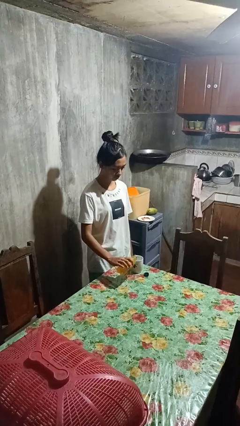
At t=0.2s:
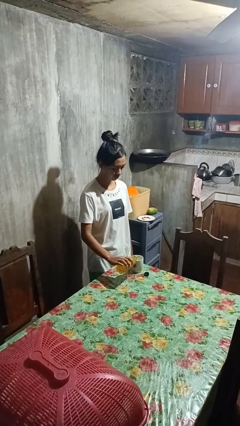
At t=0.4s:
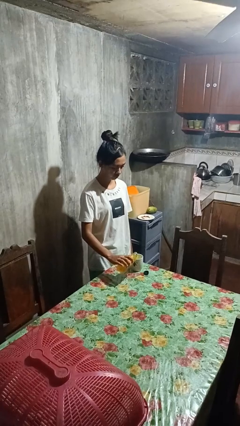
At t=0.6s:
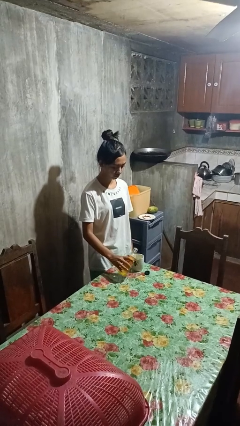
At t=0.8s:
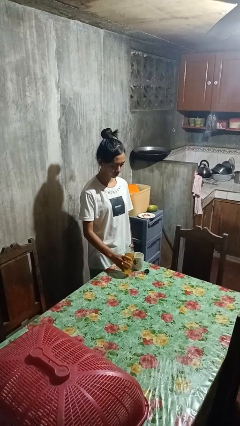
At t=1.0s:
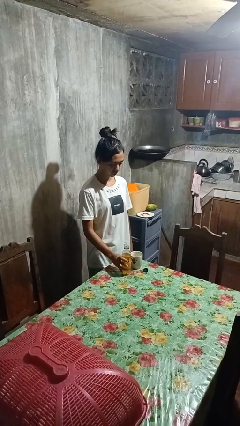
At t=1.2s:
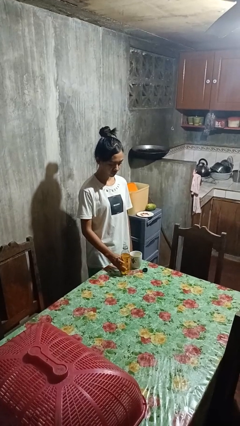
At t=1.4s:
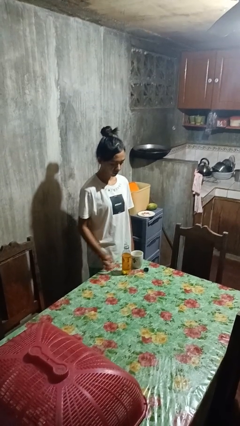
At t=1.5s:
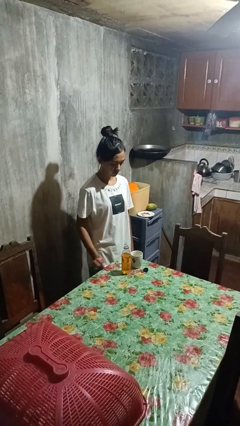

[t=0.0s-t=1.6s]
person pours liquid into cup

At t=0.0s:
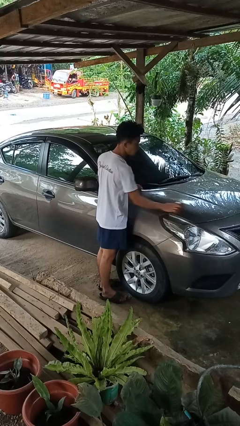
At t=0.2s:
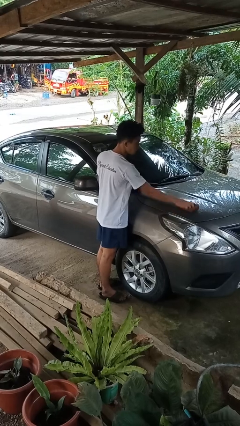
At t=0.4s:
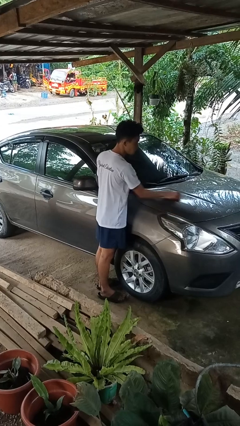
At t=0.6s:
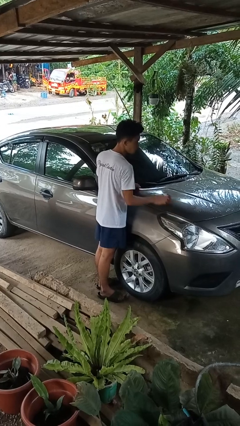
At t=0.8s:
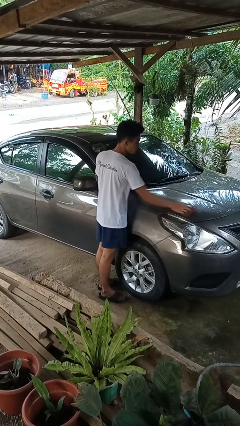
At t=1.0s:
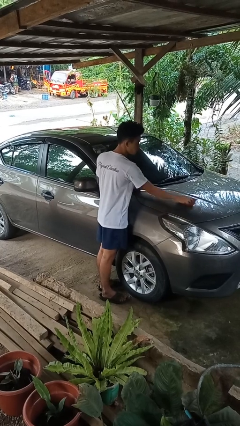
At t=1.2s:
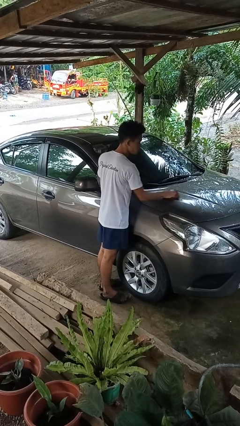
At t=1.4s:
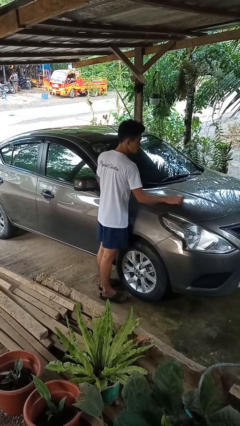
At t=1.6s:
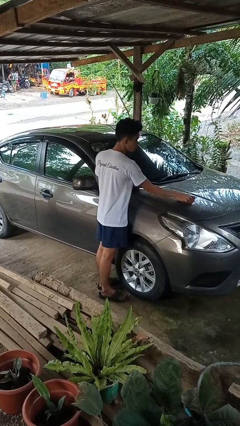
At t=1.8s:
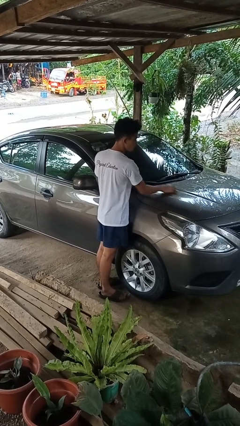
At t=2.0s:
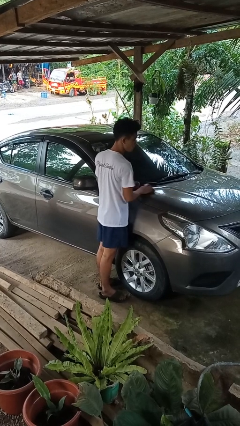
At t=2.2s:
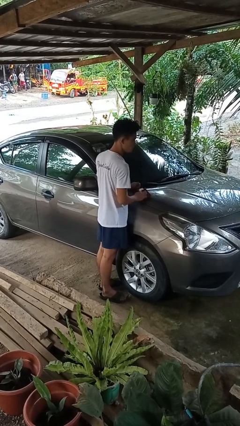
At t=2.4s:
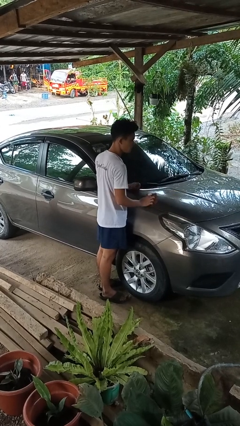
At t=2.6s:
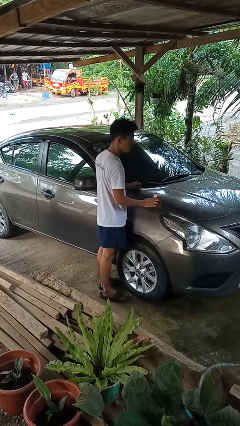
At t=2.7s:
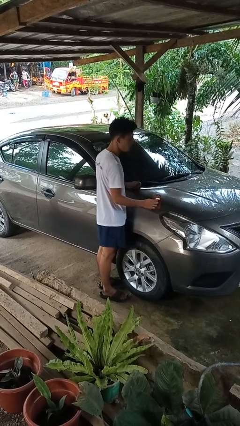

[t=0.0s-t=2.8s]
person polishes car with rag

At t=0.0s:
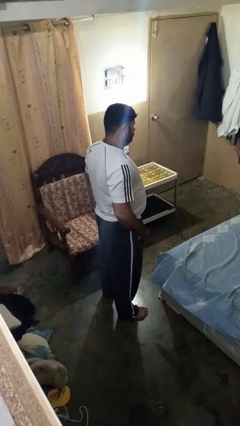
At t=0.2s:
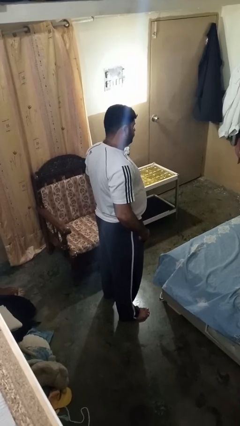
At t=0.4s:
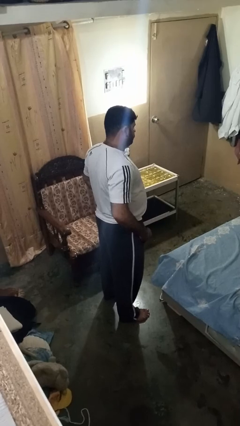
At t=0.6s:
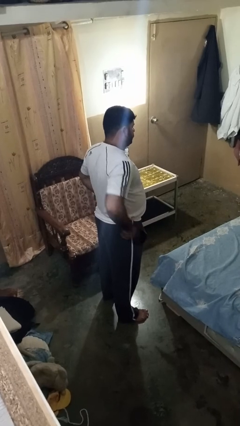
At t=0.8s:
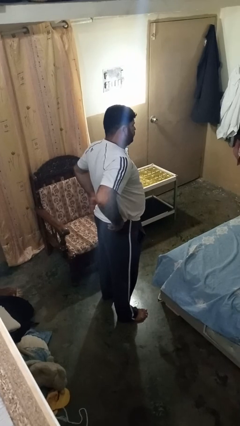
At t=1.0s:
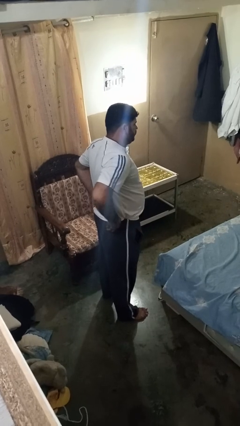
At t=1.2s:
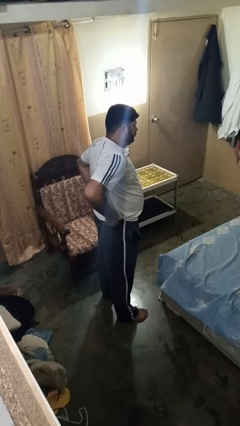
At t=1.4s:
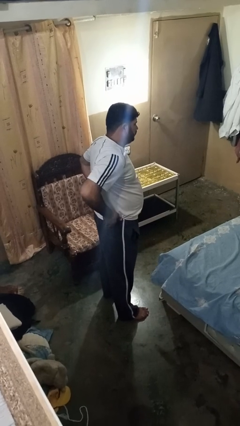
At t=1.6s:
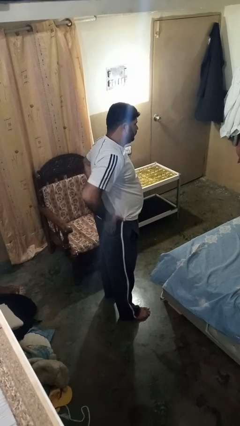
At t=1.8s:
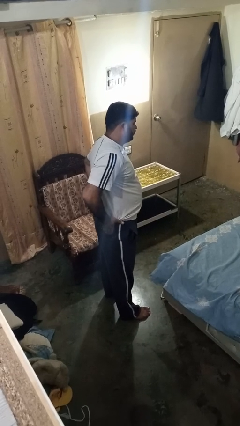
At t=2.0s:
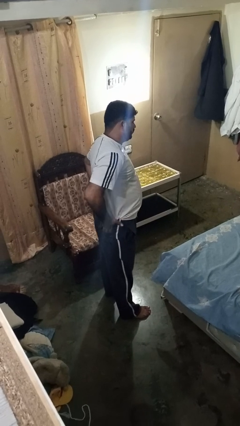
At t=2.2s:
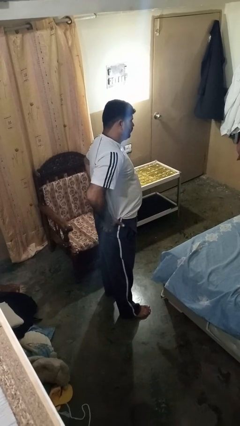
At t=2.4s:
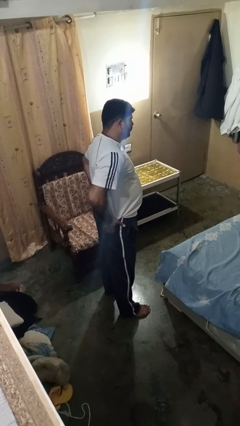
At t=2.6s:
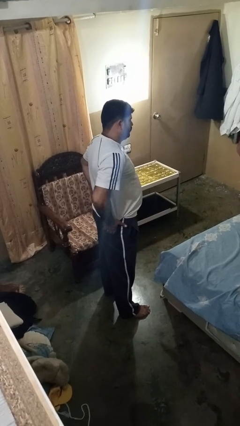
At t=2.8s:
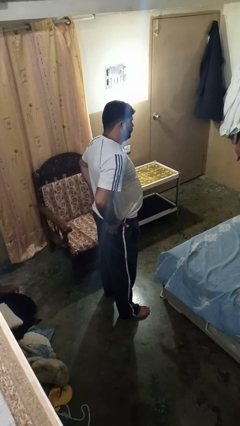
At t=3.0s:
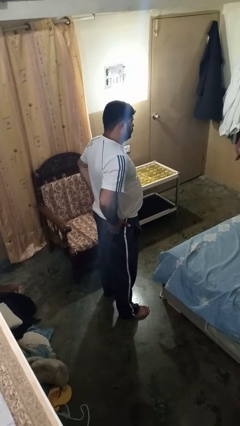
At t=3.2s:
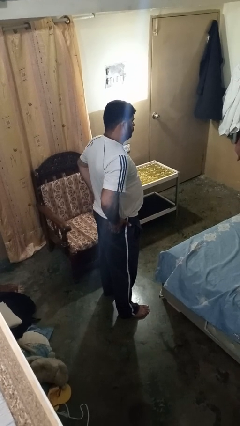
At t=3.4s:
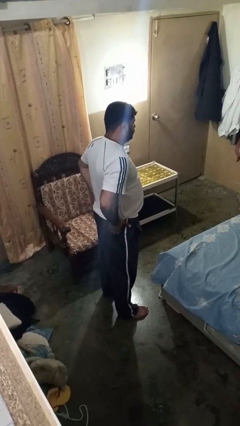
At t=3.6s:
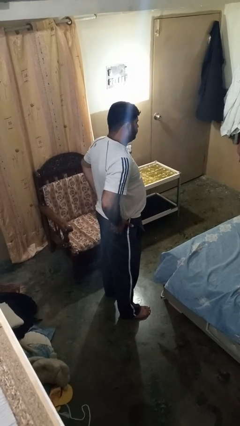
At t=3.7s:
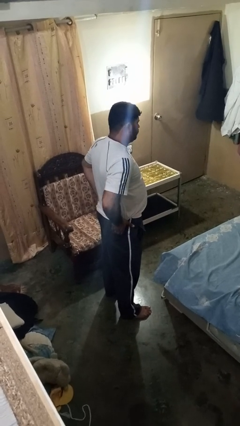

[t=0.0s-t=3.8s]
person puts hands in back pockets

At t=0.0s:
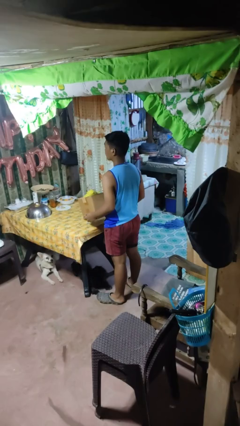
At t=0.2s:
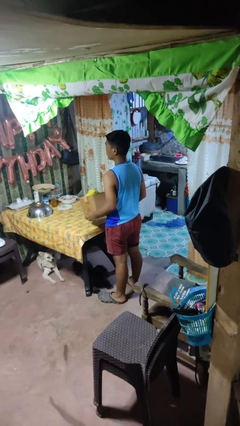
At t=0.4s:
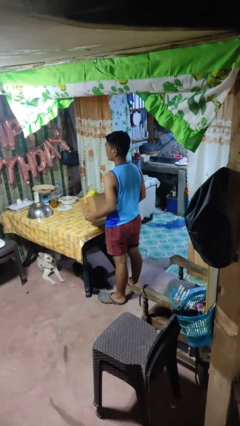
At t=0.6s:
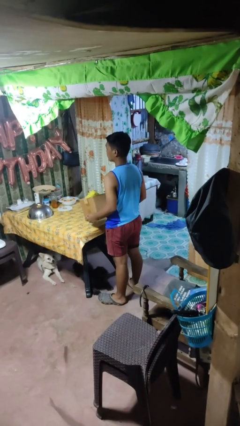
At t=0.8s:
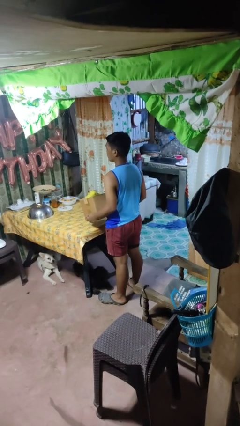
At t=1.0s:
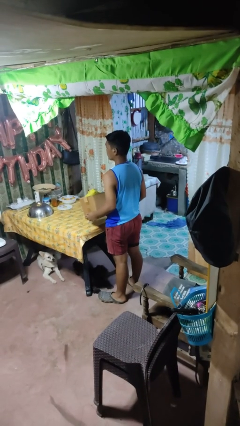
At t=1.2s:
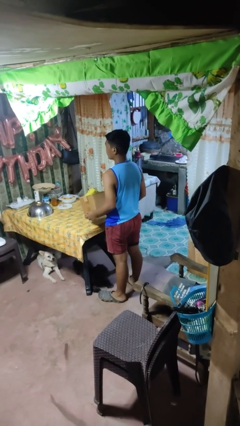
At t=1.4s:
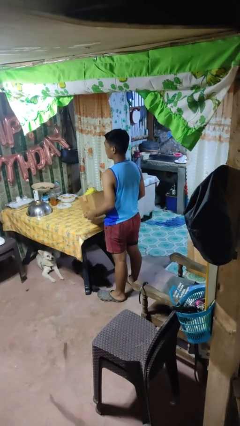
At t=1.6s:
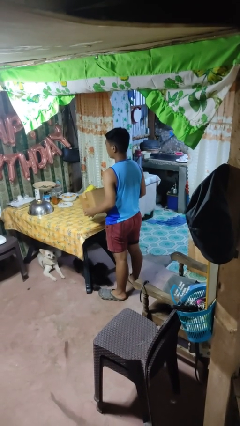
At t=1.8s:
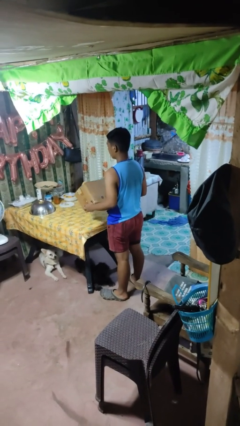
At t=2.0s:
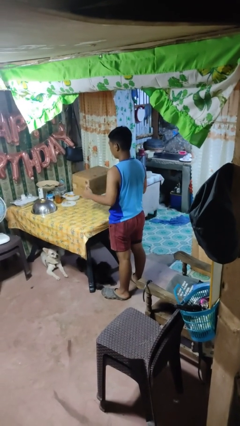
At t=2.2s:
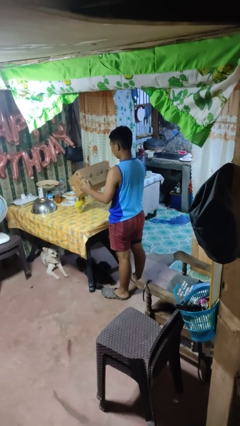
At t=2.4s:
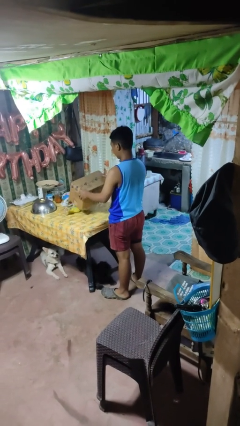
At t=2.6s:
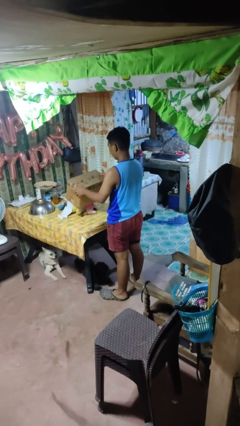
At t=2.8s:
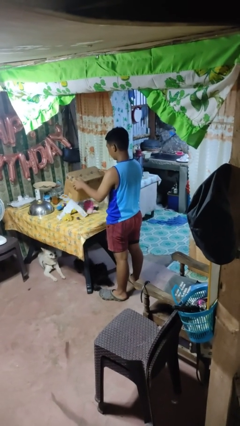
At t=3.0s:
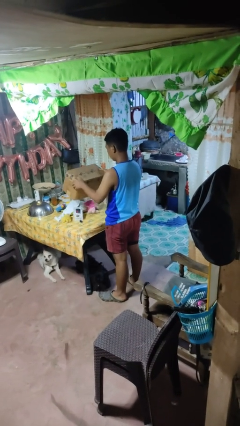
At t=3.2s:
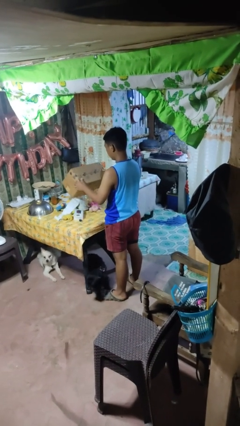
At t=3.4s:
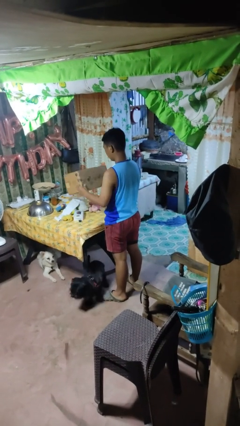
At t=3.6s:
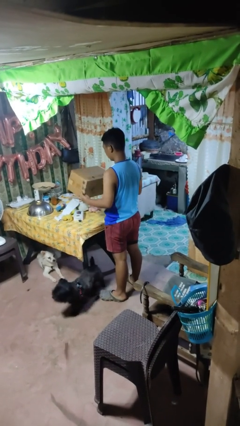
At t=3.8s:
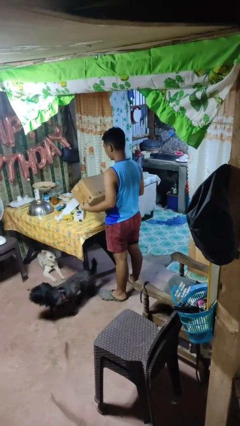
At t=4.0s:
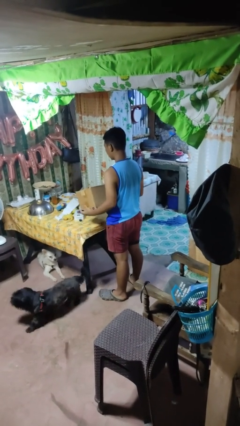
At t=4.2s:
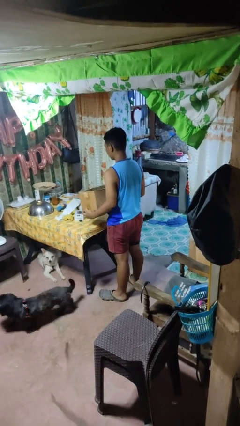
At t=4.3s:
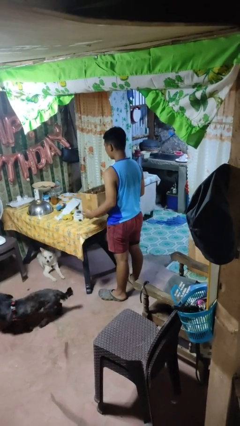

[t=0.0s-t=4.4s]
person unloads box onto table

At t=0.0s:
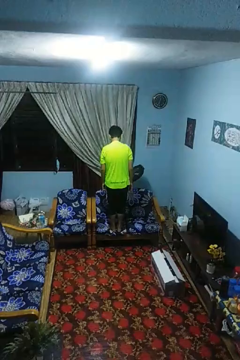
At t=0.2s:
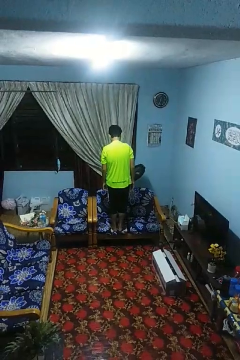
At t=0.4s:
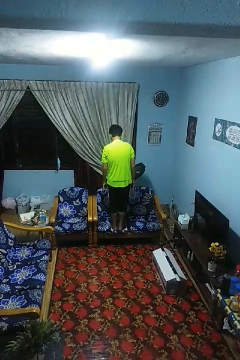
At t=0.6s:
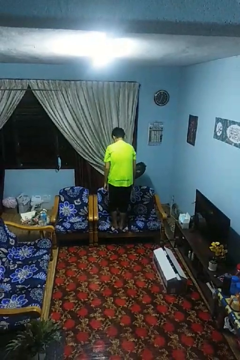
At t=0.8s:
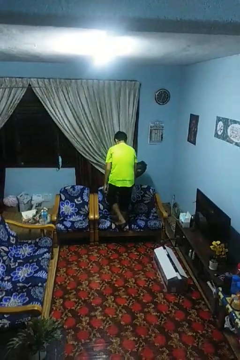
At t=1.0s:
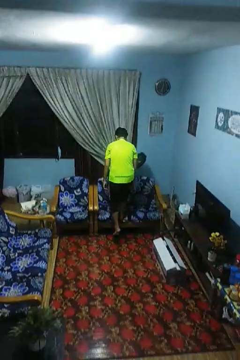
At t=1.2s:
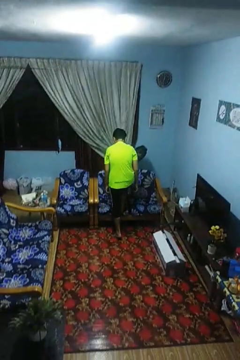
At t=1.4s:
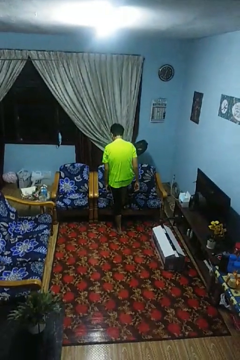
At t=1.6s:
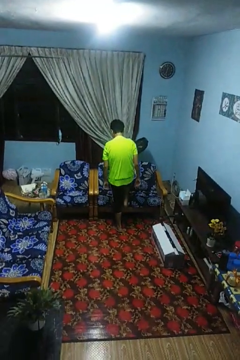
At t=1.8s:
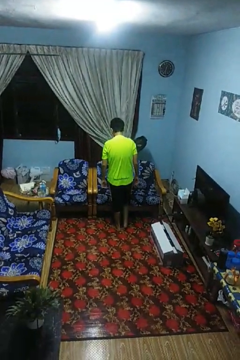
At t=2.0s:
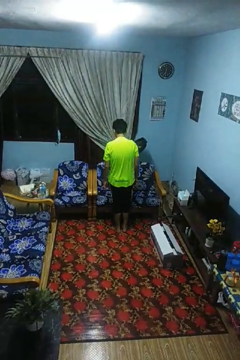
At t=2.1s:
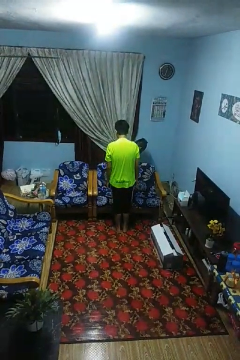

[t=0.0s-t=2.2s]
person climbs off couch

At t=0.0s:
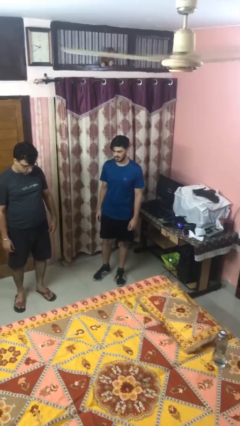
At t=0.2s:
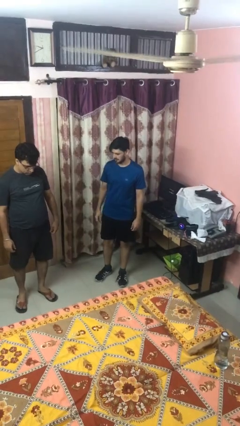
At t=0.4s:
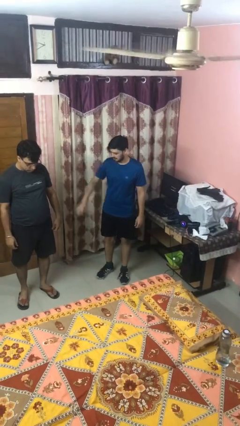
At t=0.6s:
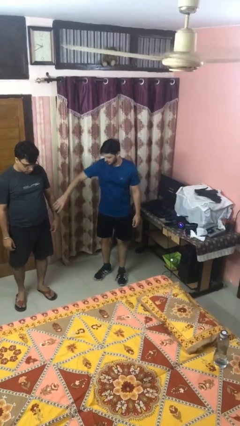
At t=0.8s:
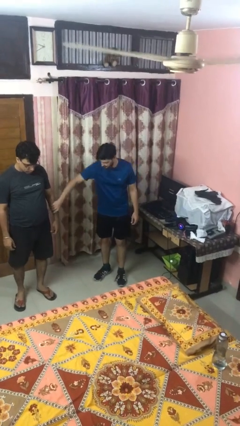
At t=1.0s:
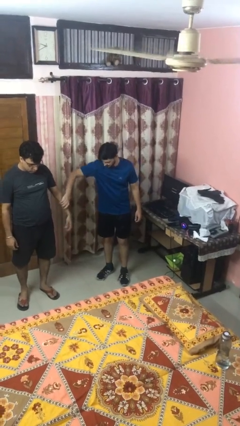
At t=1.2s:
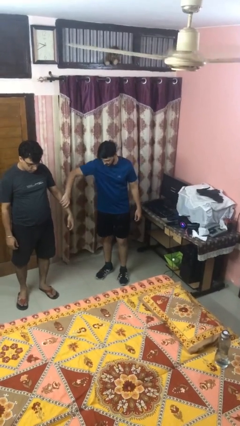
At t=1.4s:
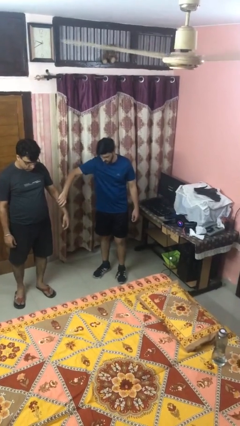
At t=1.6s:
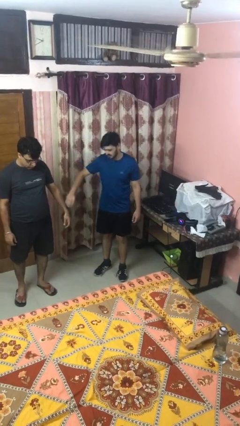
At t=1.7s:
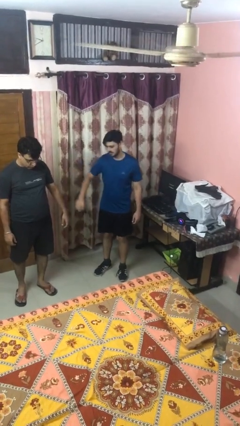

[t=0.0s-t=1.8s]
person grabs person by forearm

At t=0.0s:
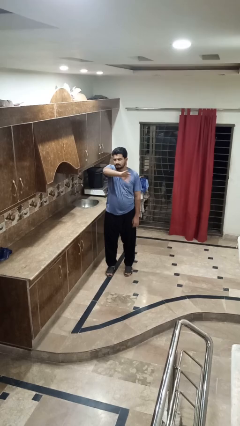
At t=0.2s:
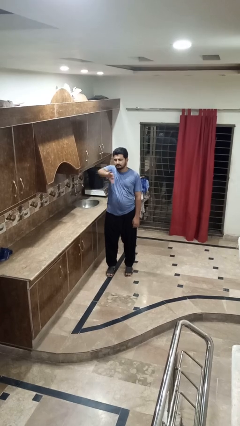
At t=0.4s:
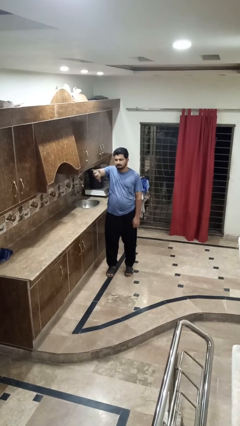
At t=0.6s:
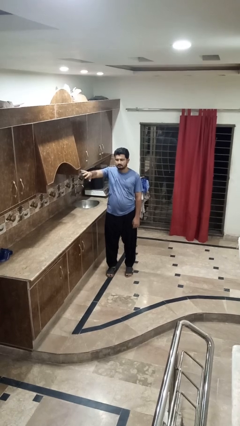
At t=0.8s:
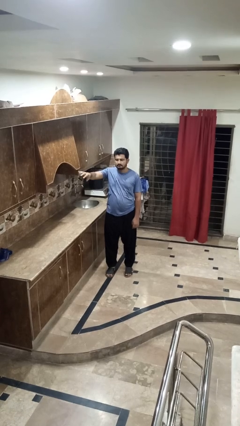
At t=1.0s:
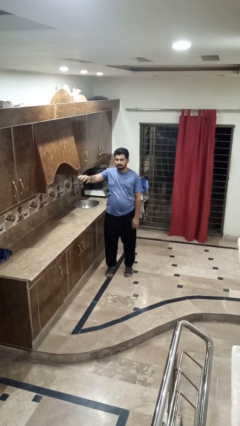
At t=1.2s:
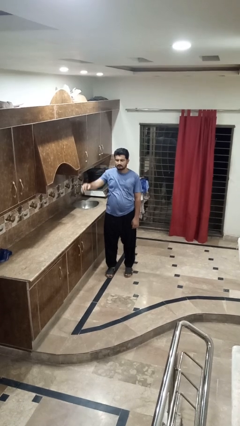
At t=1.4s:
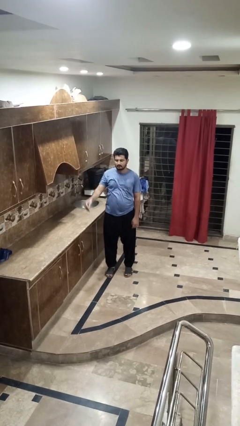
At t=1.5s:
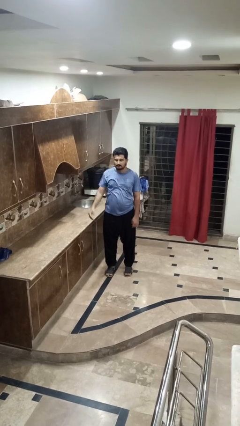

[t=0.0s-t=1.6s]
person gestures swipe right
